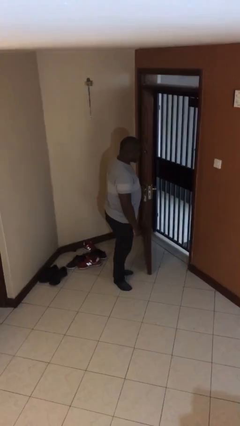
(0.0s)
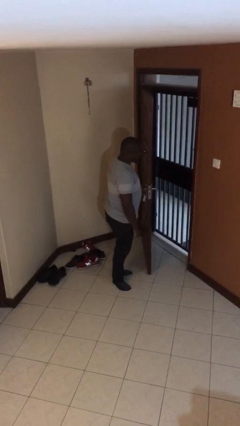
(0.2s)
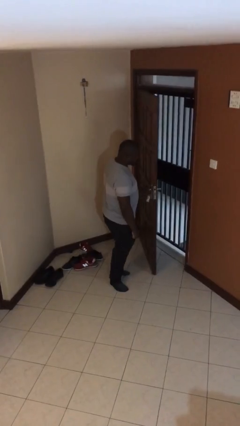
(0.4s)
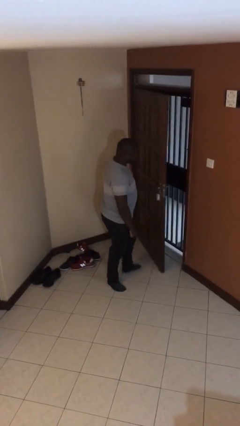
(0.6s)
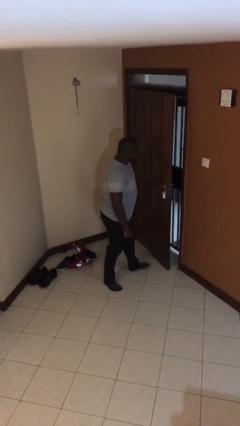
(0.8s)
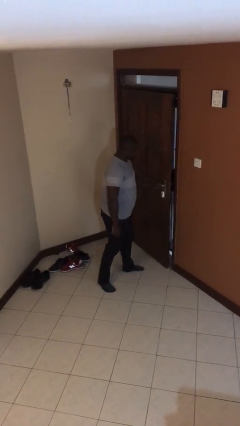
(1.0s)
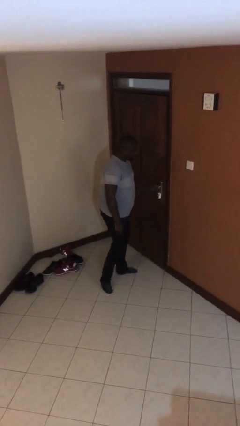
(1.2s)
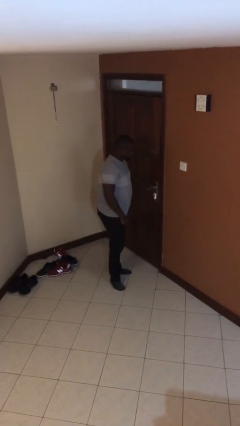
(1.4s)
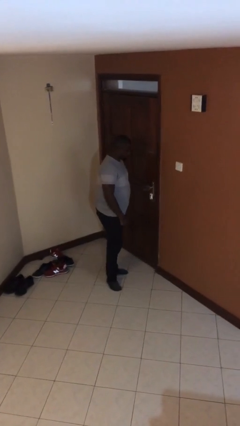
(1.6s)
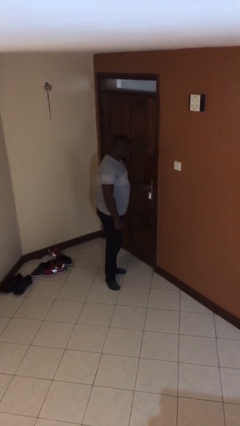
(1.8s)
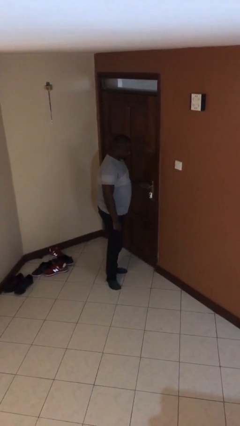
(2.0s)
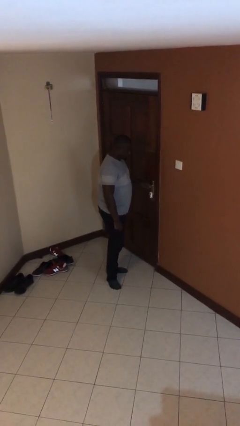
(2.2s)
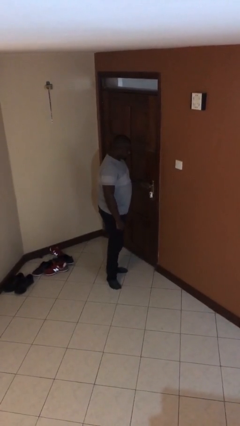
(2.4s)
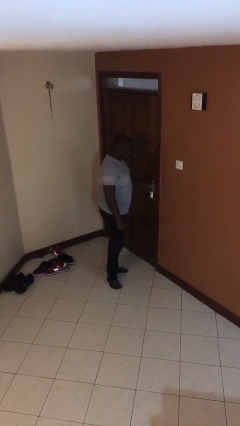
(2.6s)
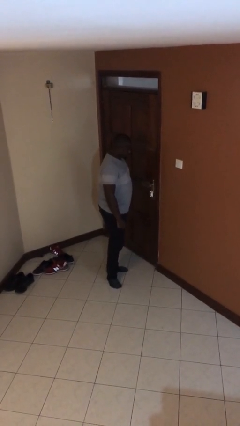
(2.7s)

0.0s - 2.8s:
person closes facility door

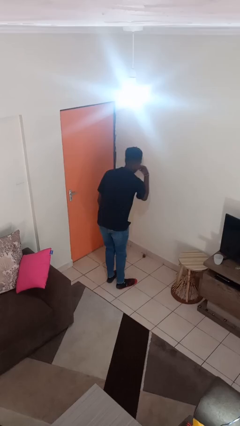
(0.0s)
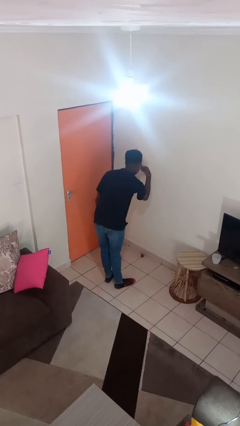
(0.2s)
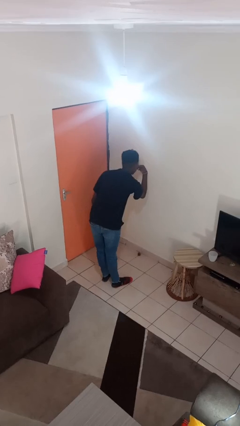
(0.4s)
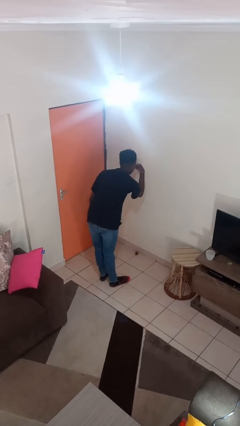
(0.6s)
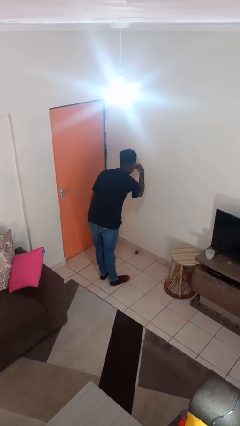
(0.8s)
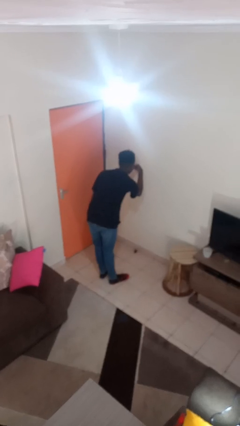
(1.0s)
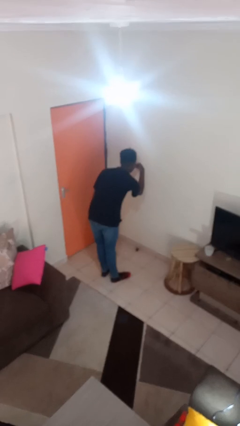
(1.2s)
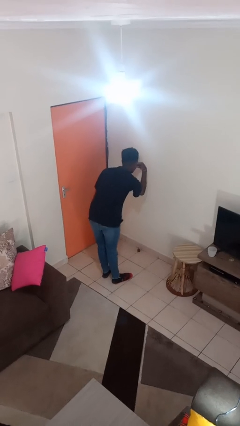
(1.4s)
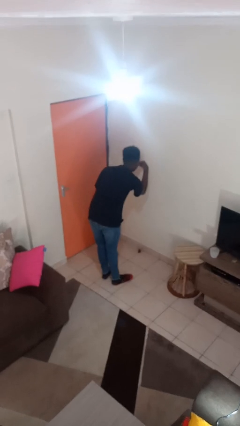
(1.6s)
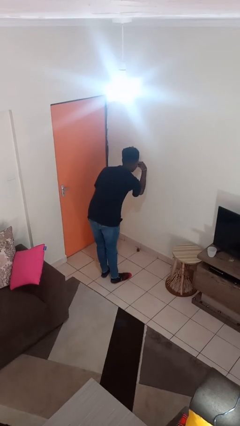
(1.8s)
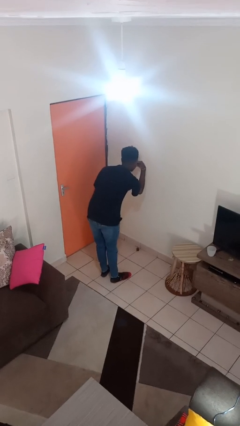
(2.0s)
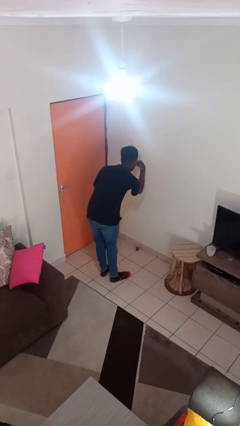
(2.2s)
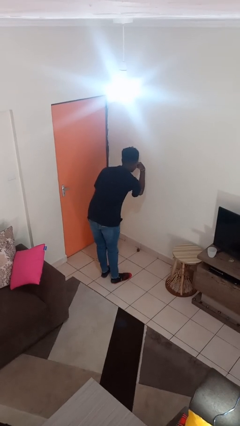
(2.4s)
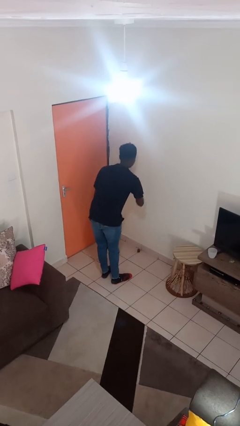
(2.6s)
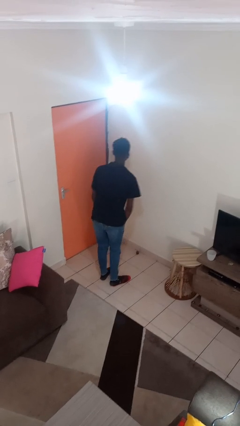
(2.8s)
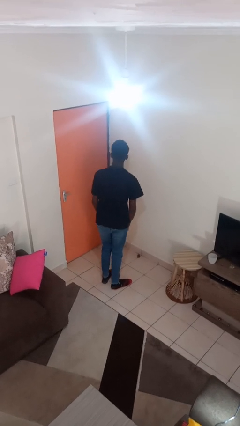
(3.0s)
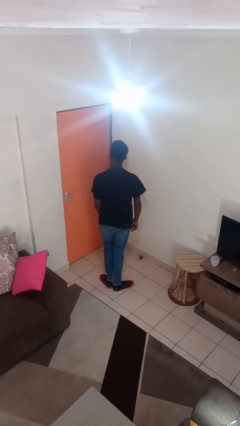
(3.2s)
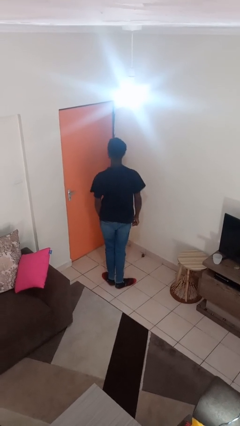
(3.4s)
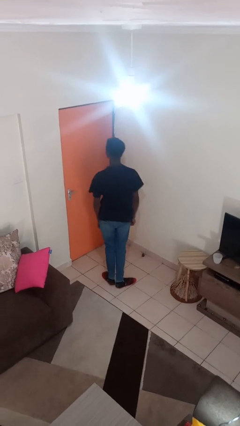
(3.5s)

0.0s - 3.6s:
person gestures watch closely

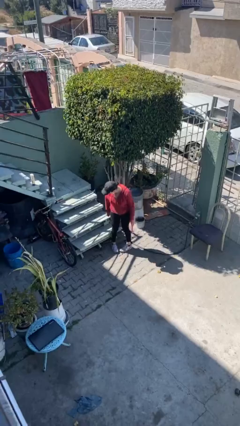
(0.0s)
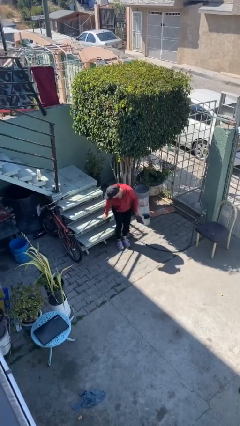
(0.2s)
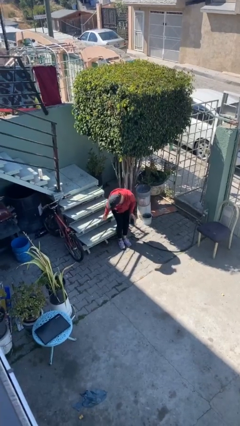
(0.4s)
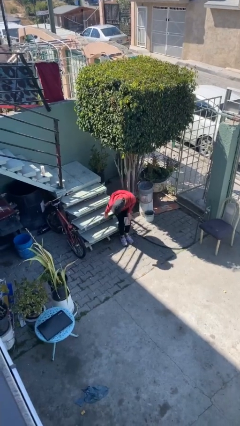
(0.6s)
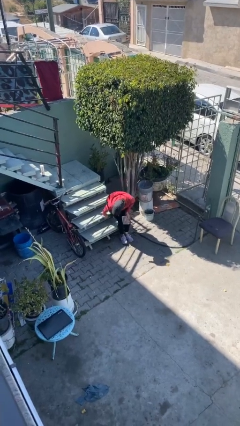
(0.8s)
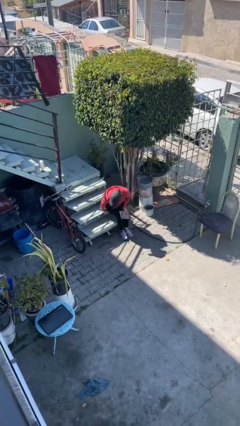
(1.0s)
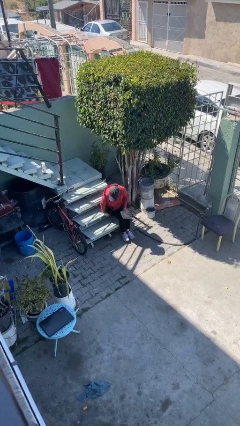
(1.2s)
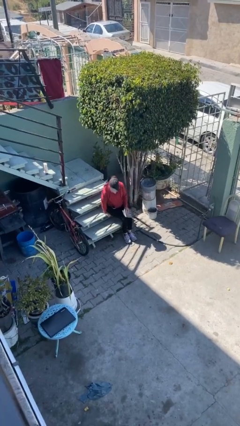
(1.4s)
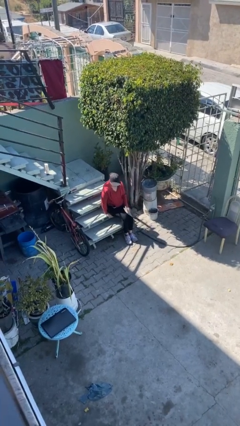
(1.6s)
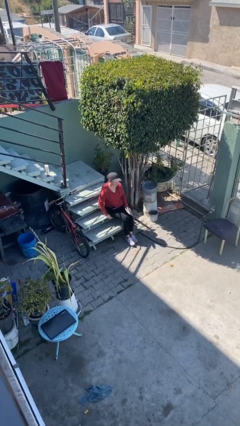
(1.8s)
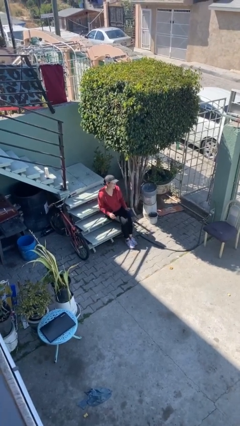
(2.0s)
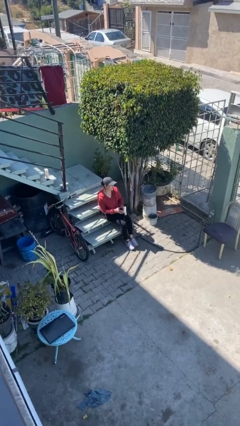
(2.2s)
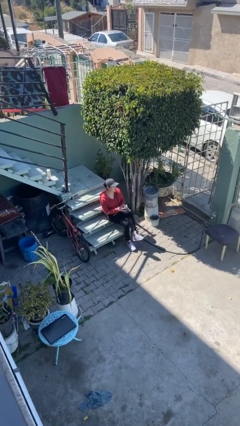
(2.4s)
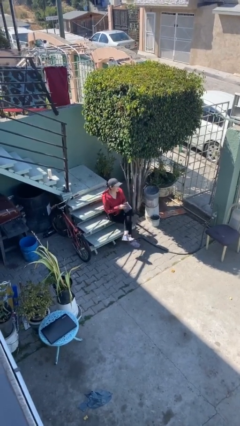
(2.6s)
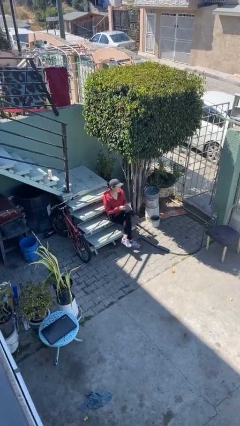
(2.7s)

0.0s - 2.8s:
person sits down

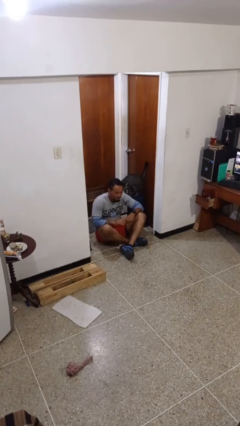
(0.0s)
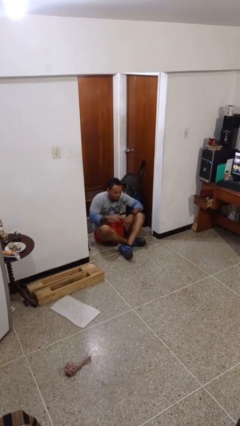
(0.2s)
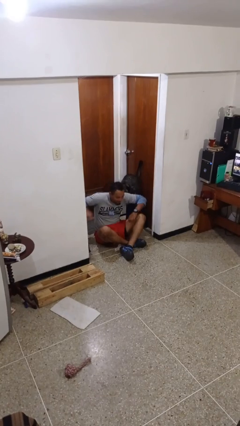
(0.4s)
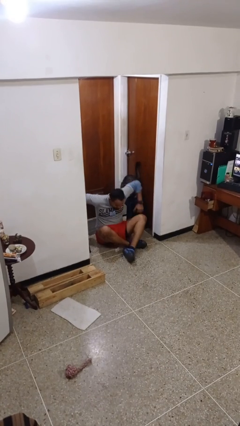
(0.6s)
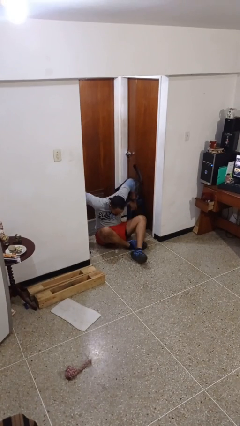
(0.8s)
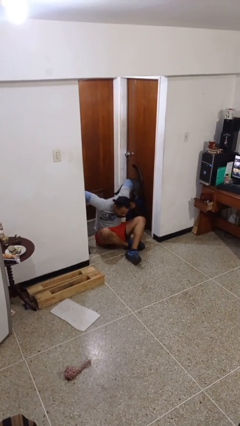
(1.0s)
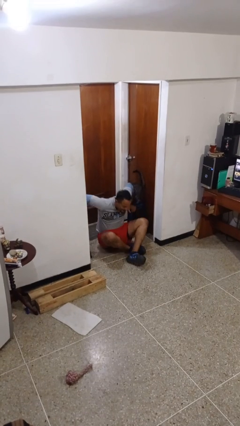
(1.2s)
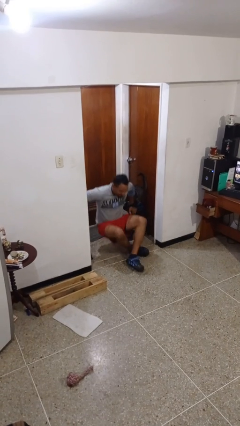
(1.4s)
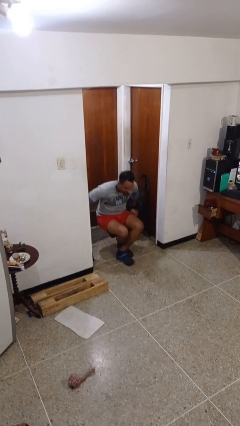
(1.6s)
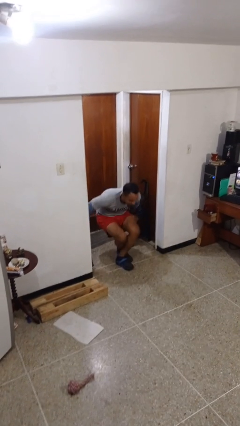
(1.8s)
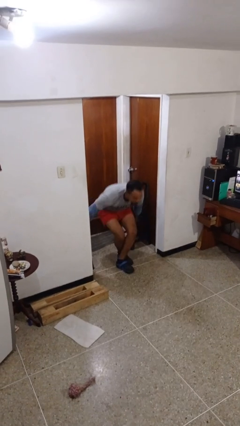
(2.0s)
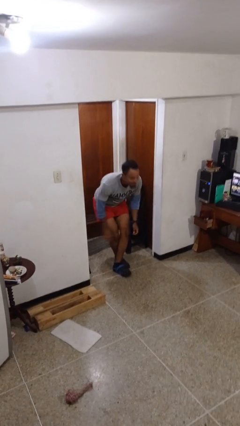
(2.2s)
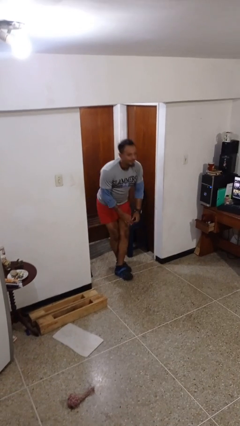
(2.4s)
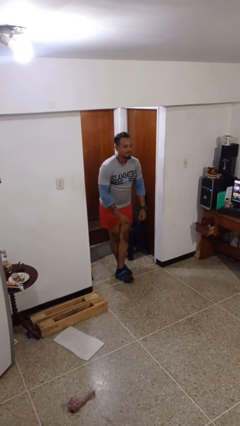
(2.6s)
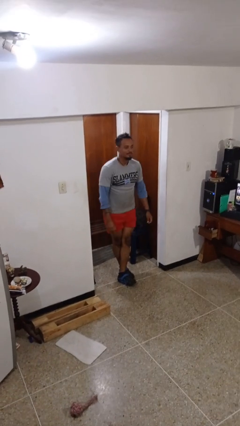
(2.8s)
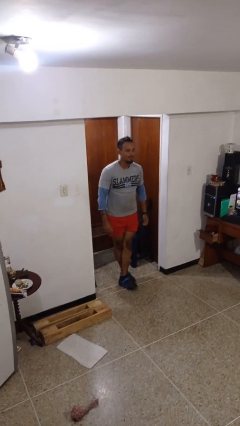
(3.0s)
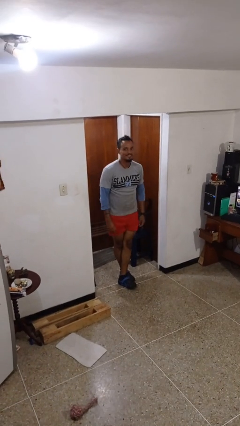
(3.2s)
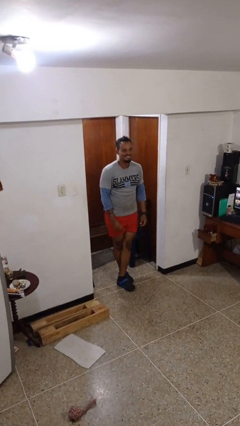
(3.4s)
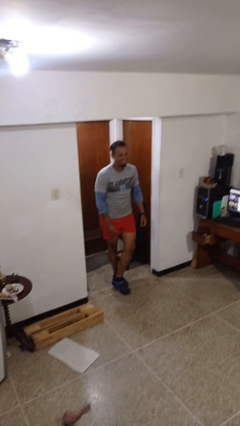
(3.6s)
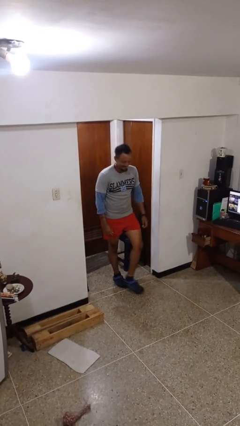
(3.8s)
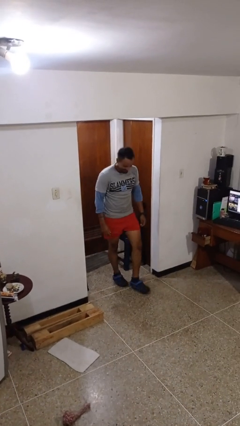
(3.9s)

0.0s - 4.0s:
person stands up from floor

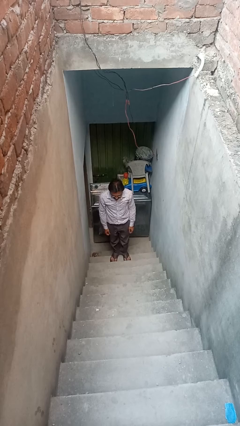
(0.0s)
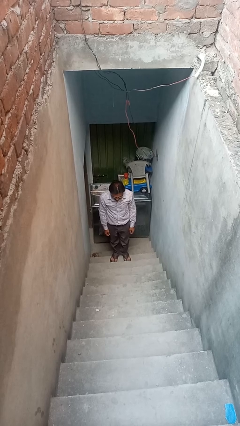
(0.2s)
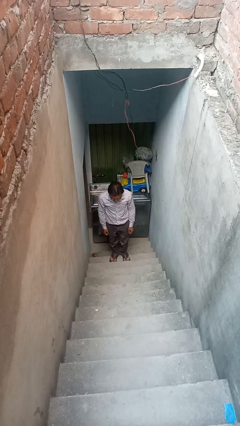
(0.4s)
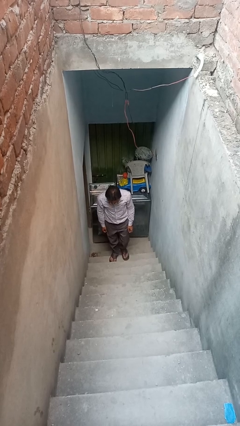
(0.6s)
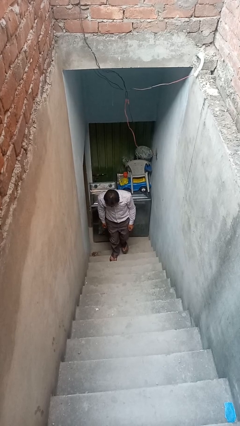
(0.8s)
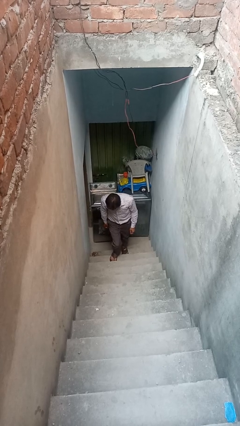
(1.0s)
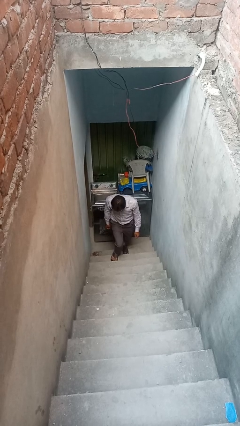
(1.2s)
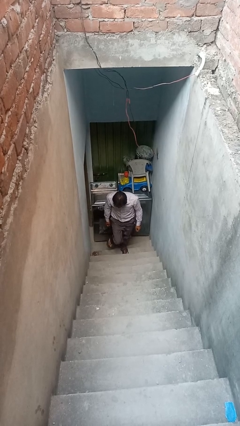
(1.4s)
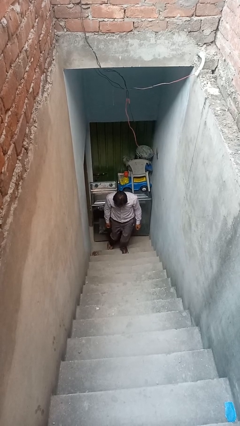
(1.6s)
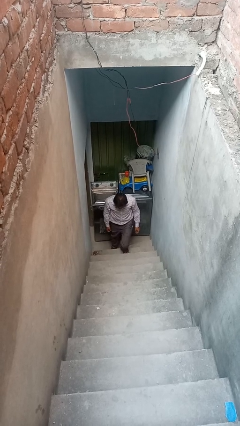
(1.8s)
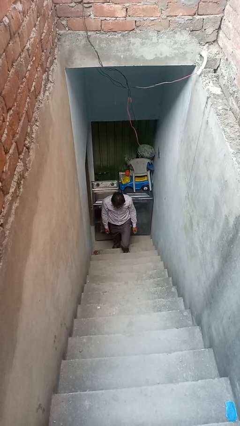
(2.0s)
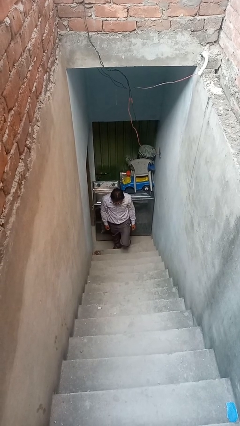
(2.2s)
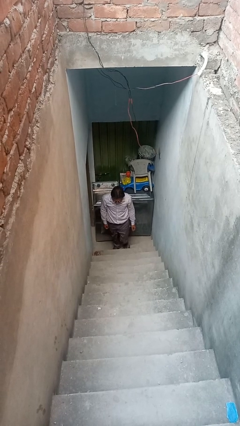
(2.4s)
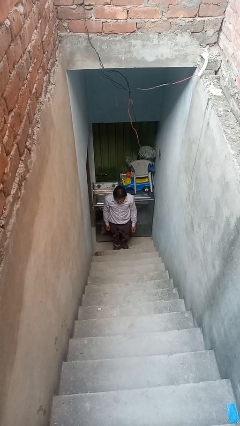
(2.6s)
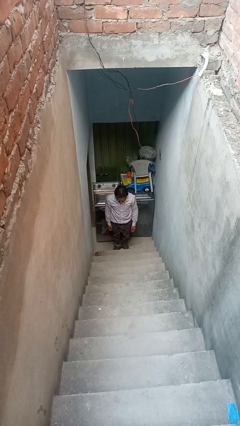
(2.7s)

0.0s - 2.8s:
person climbs down stairs

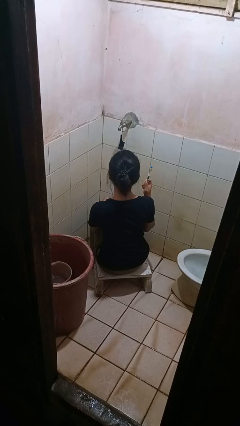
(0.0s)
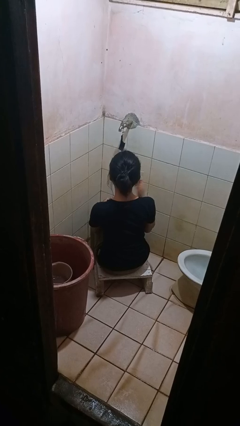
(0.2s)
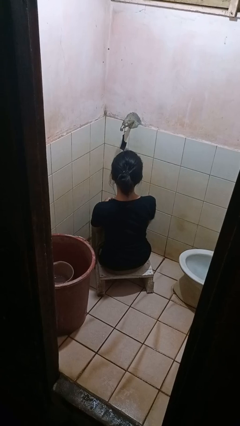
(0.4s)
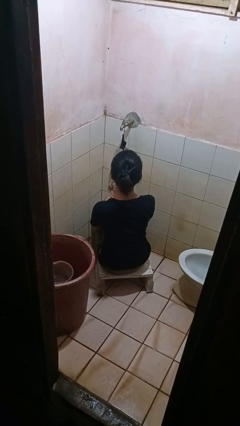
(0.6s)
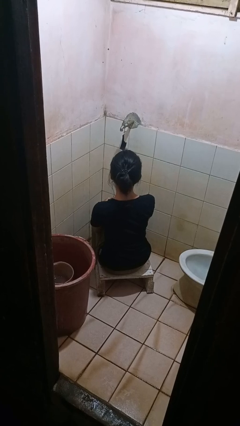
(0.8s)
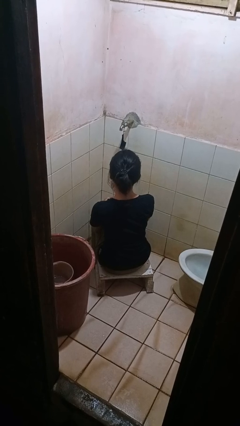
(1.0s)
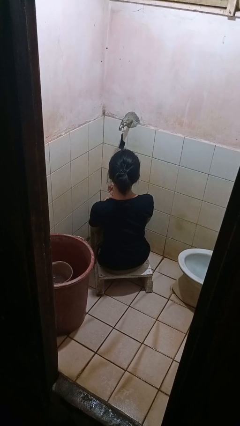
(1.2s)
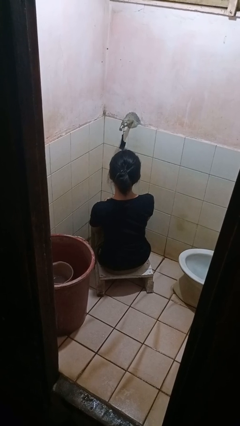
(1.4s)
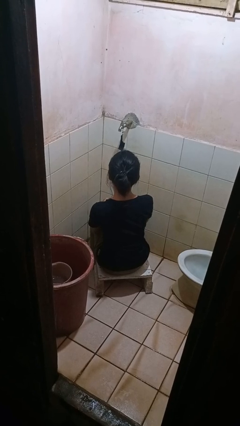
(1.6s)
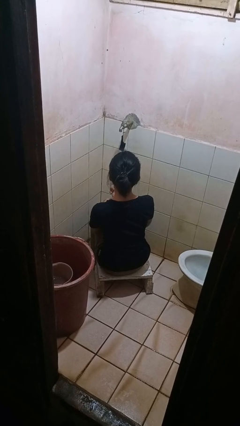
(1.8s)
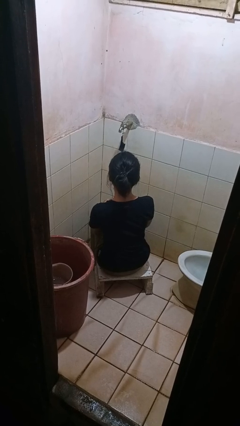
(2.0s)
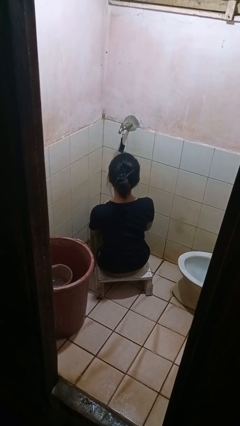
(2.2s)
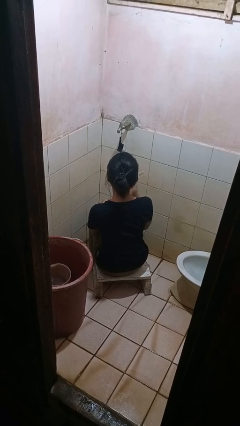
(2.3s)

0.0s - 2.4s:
person brushes teeth
